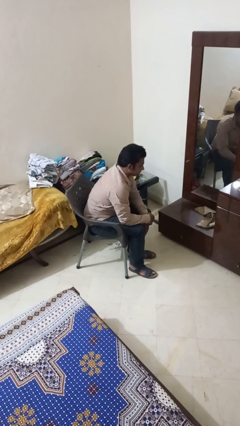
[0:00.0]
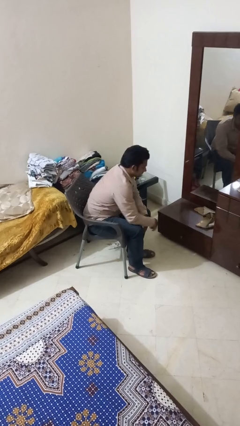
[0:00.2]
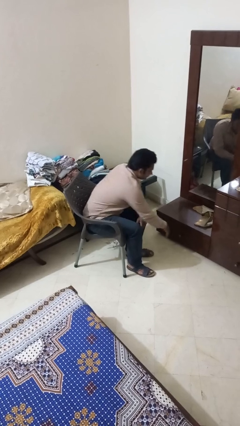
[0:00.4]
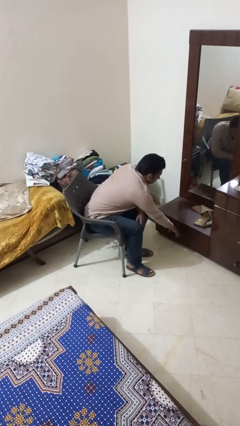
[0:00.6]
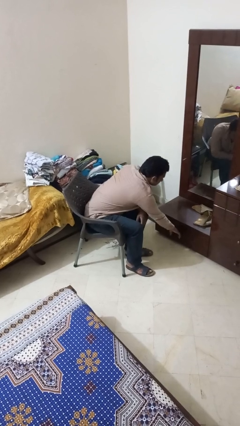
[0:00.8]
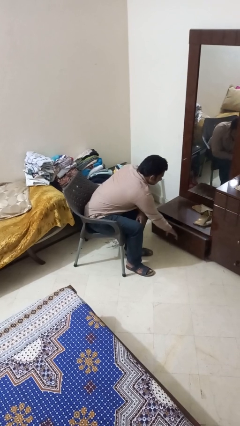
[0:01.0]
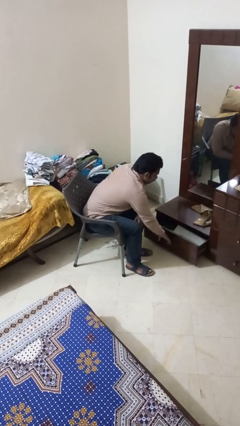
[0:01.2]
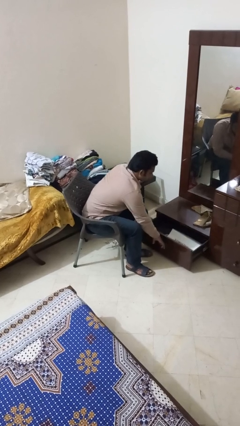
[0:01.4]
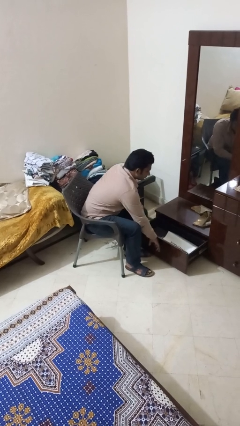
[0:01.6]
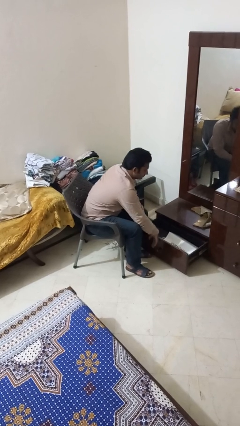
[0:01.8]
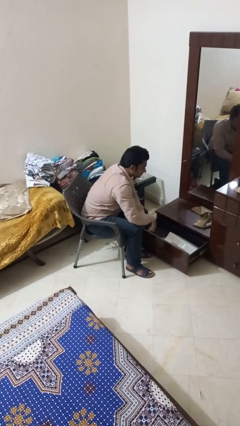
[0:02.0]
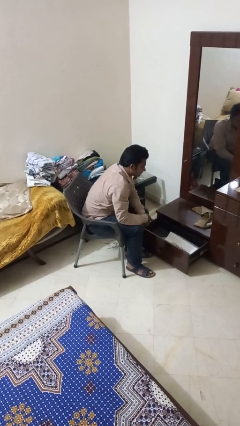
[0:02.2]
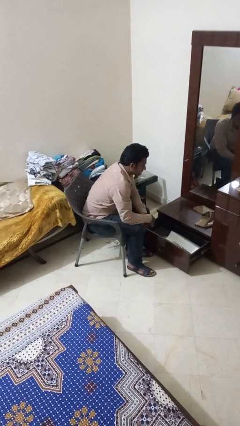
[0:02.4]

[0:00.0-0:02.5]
person opens closet door

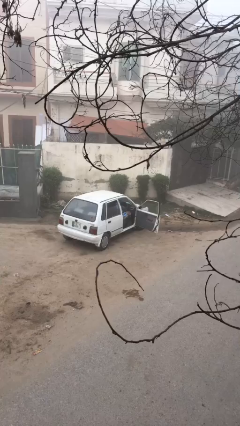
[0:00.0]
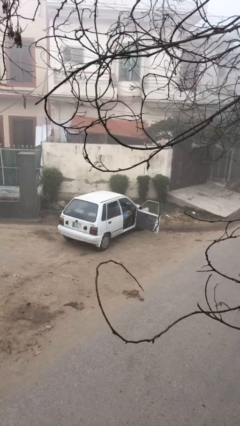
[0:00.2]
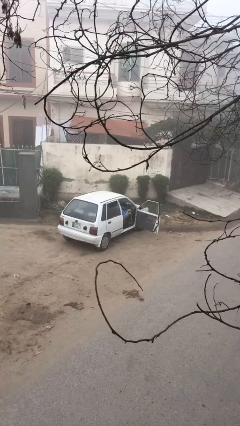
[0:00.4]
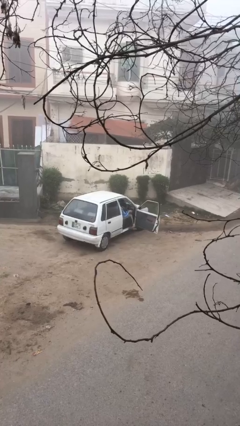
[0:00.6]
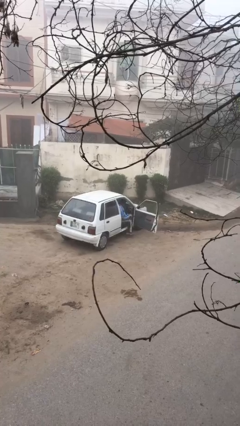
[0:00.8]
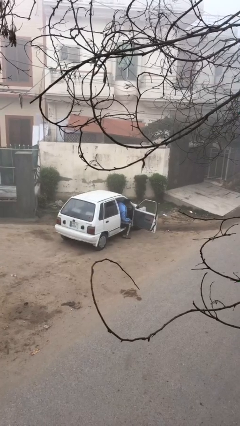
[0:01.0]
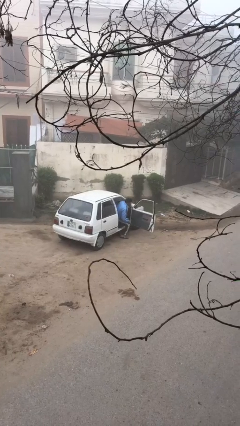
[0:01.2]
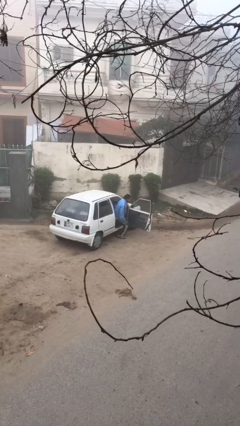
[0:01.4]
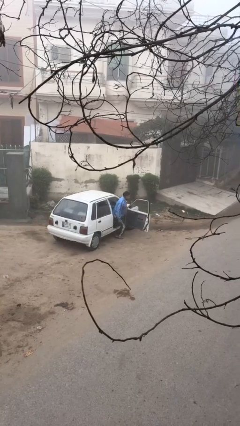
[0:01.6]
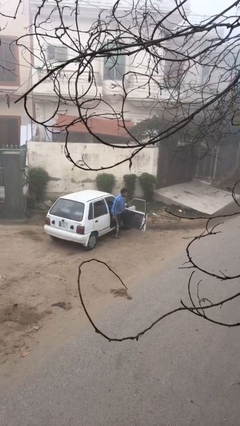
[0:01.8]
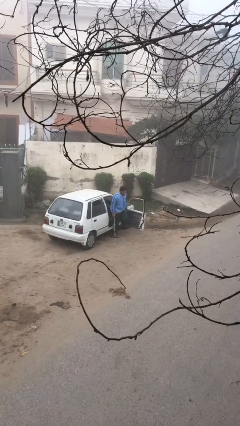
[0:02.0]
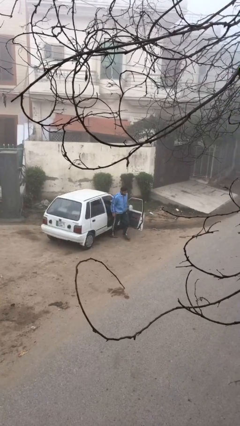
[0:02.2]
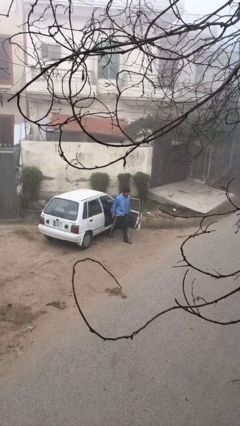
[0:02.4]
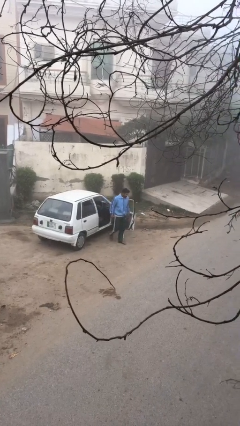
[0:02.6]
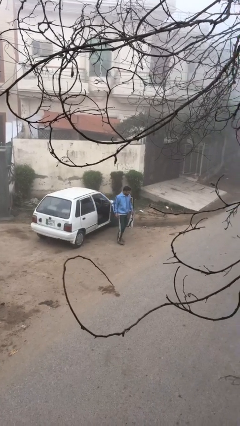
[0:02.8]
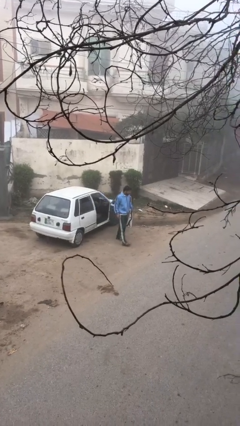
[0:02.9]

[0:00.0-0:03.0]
person exits car

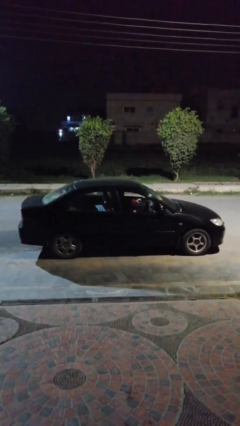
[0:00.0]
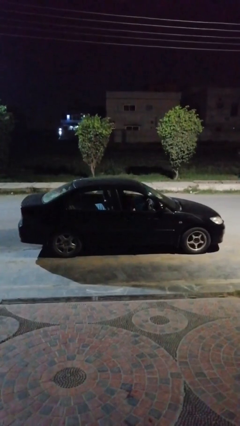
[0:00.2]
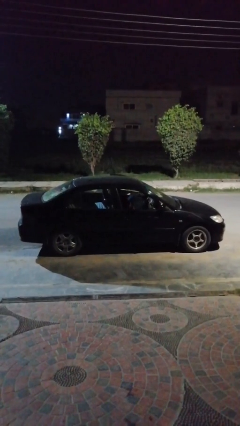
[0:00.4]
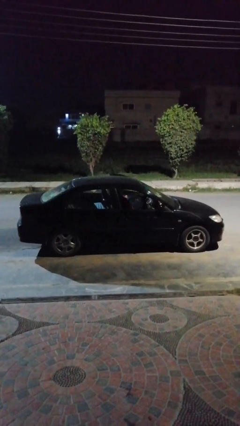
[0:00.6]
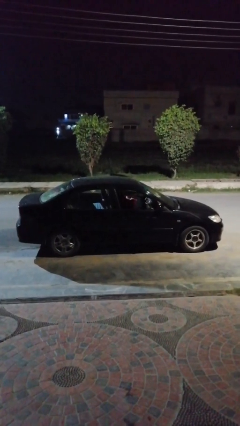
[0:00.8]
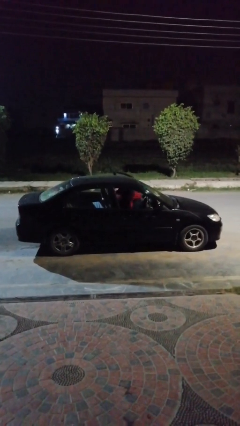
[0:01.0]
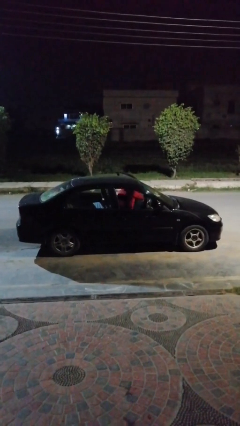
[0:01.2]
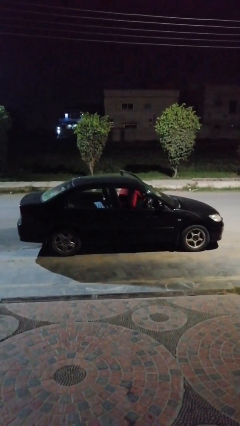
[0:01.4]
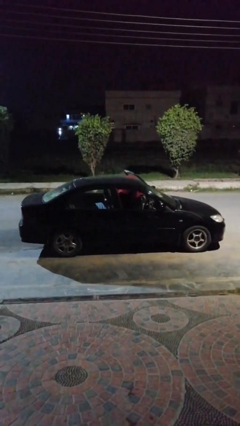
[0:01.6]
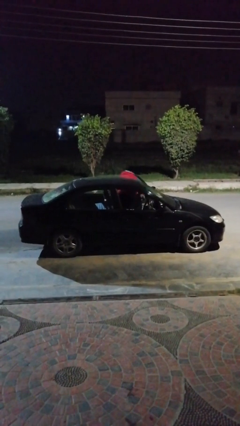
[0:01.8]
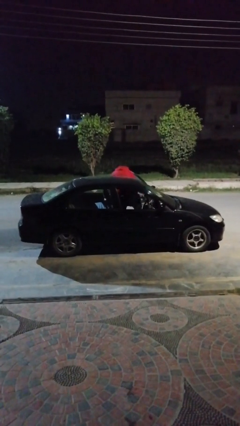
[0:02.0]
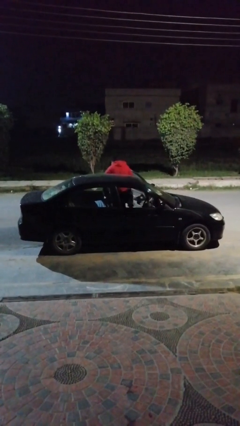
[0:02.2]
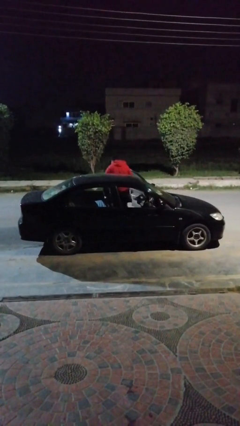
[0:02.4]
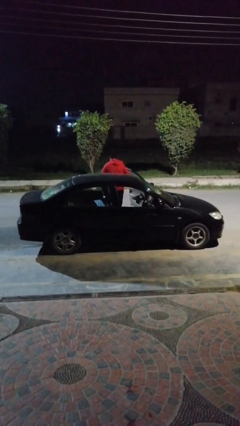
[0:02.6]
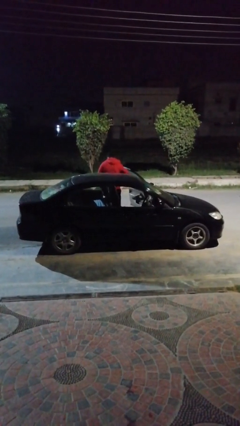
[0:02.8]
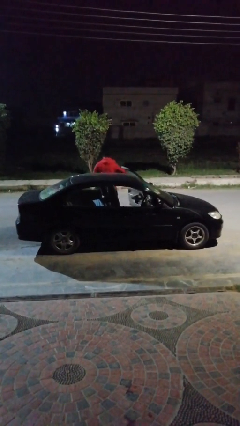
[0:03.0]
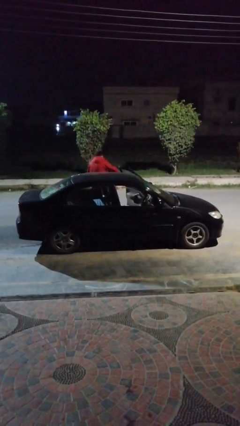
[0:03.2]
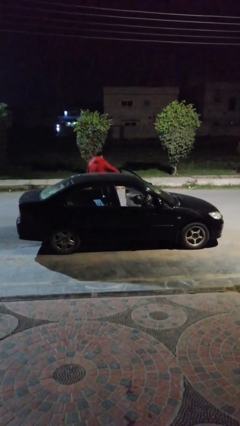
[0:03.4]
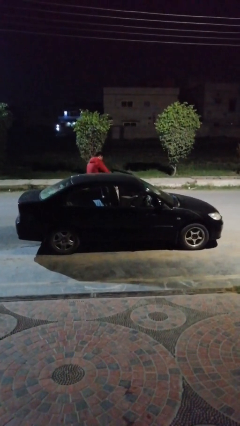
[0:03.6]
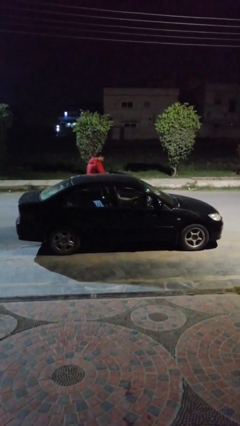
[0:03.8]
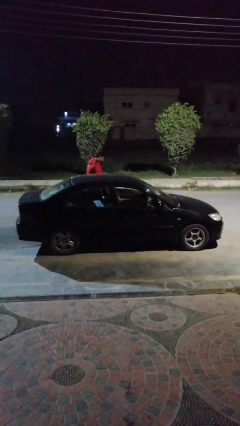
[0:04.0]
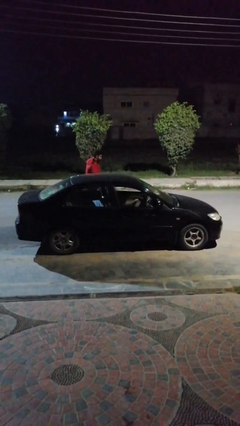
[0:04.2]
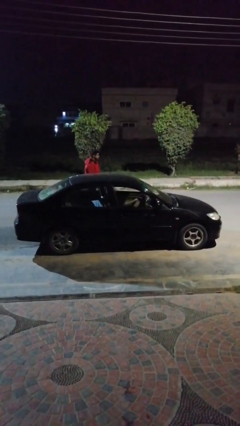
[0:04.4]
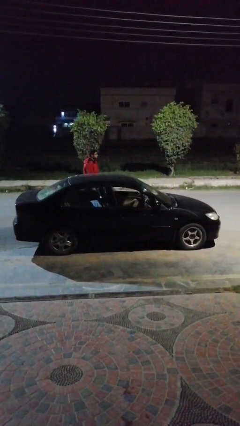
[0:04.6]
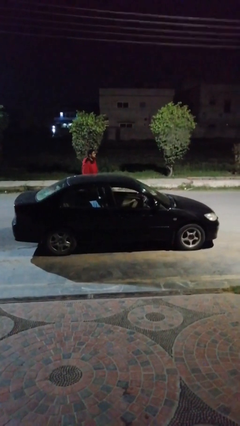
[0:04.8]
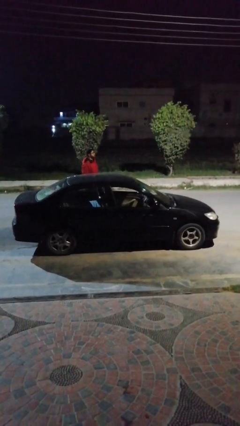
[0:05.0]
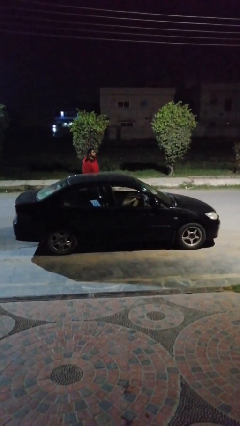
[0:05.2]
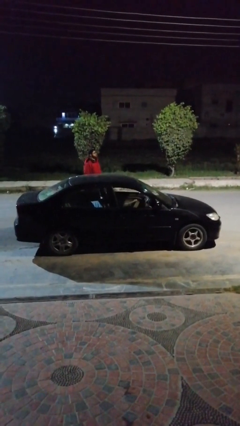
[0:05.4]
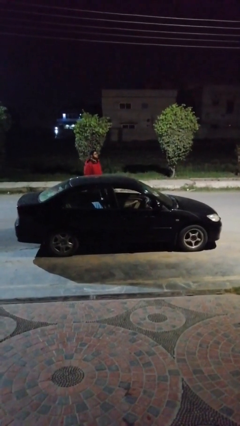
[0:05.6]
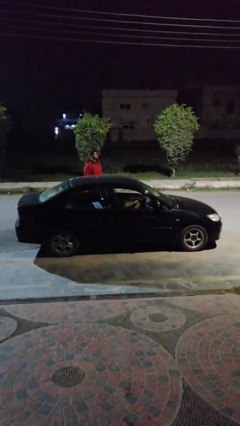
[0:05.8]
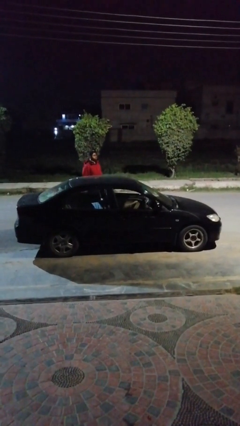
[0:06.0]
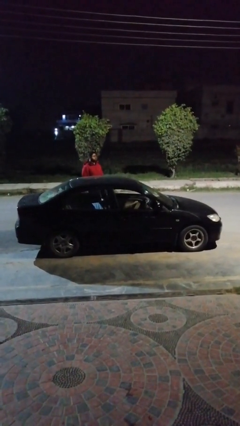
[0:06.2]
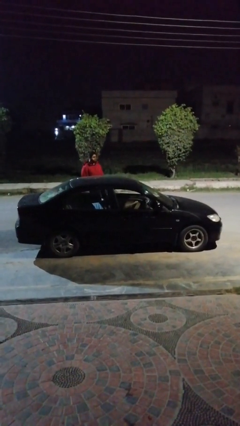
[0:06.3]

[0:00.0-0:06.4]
car drops off person

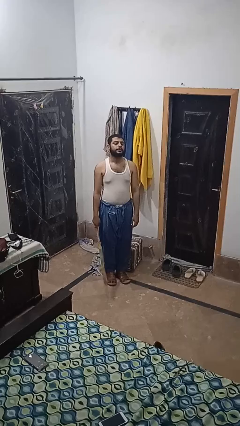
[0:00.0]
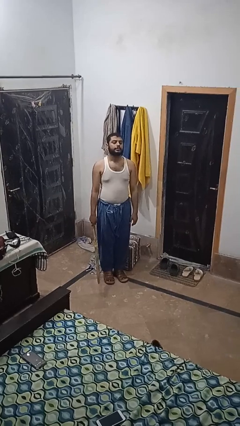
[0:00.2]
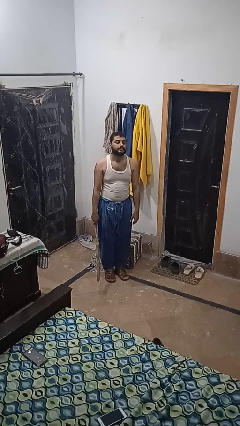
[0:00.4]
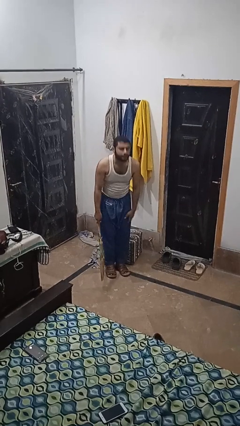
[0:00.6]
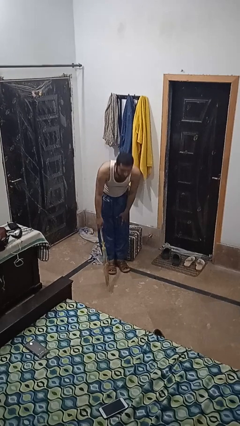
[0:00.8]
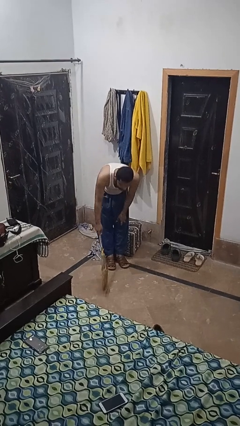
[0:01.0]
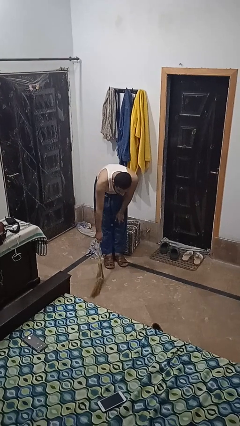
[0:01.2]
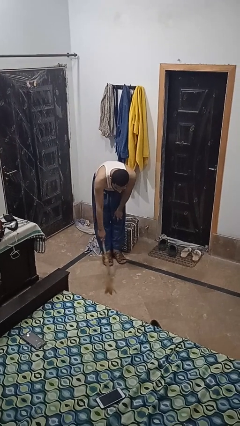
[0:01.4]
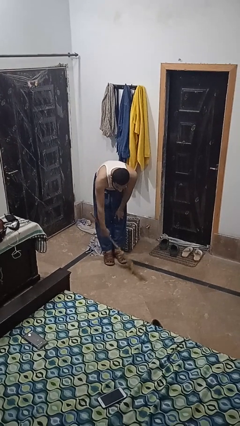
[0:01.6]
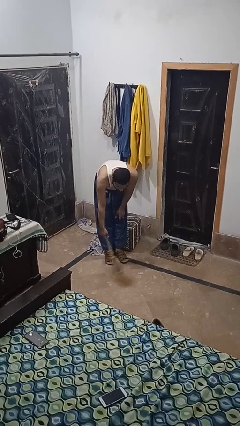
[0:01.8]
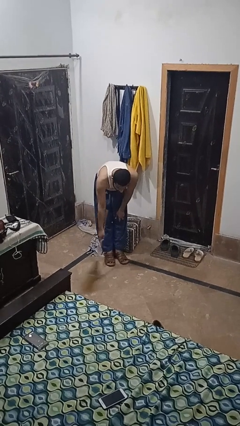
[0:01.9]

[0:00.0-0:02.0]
person sweeps floor

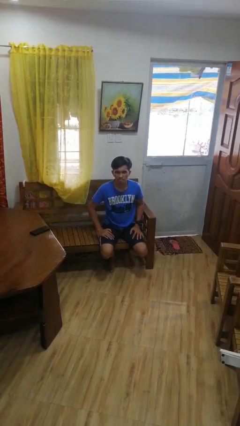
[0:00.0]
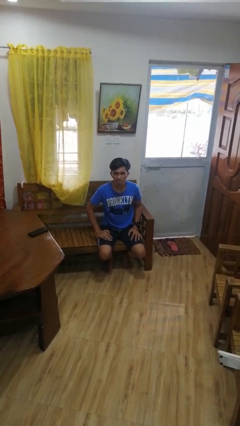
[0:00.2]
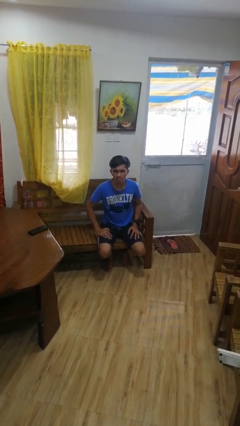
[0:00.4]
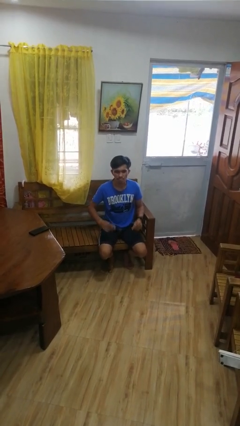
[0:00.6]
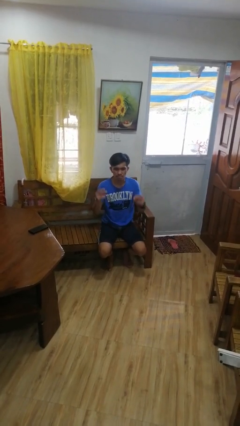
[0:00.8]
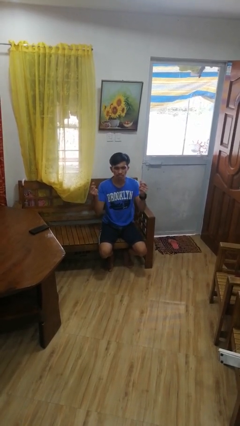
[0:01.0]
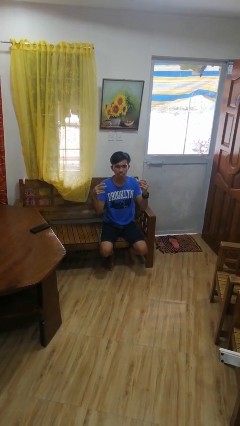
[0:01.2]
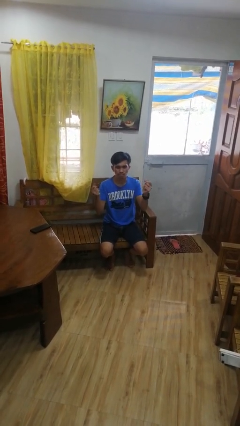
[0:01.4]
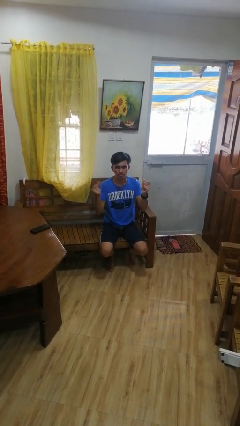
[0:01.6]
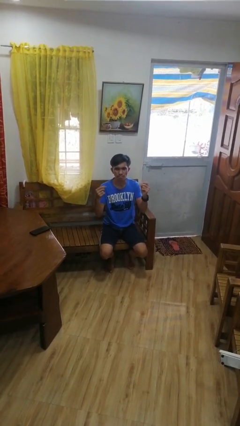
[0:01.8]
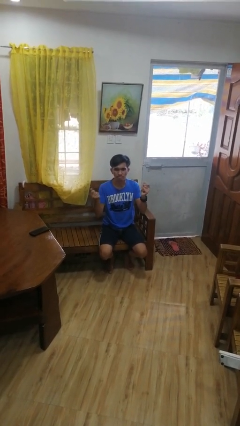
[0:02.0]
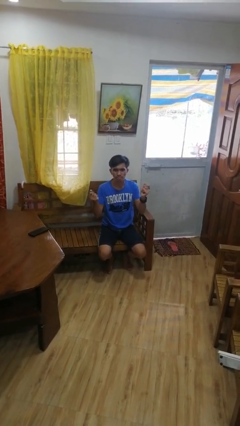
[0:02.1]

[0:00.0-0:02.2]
person snaps fingers

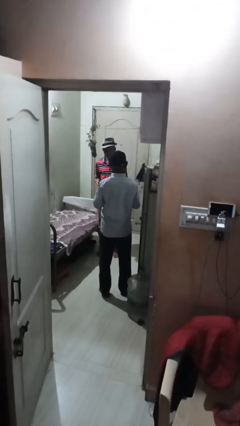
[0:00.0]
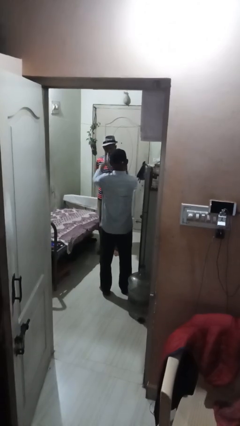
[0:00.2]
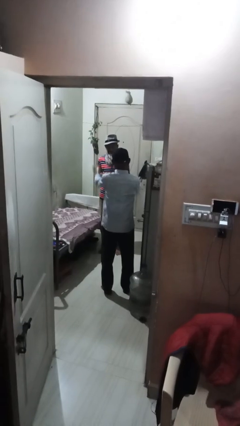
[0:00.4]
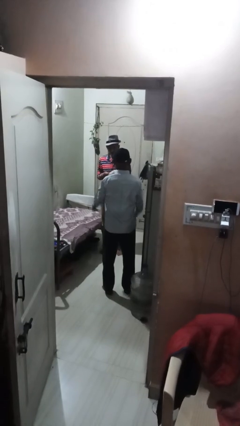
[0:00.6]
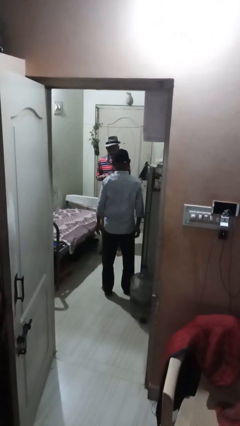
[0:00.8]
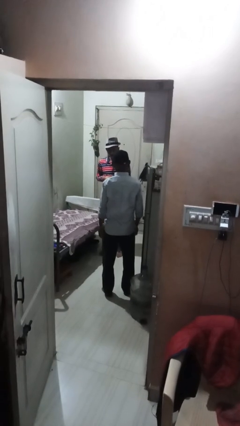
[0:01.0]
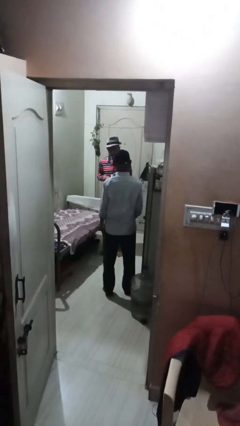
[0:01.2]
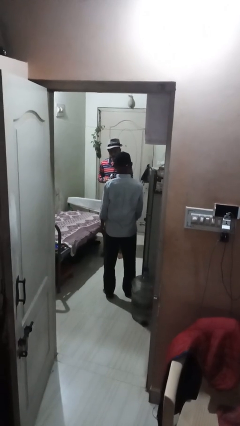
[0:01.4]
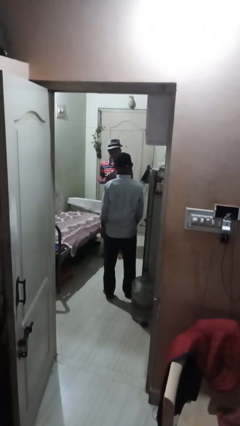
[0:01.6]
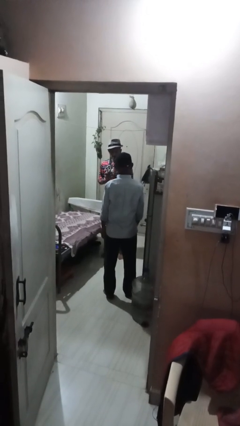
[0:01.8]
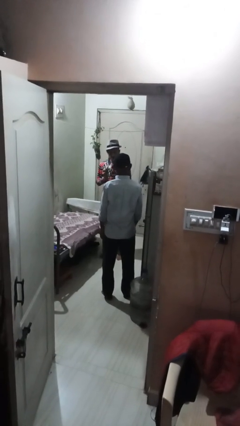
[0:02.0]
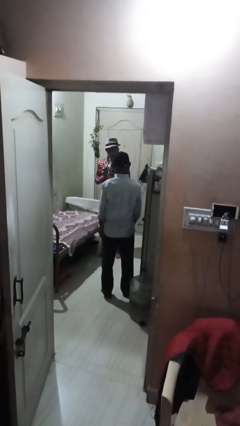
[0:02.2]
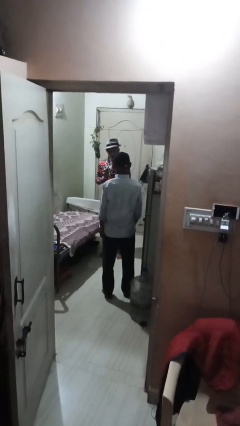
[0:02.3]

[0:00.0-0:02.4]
person catches object from person
